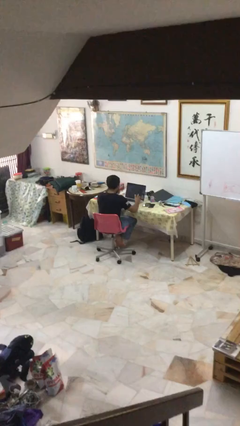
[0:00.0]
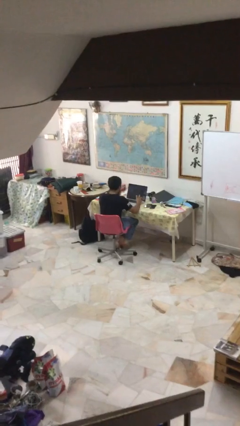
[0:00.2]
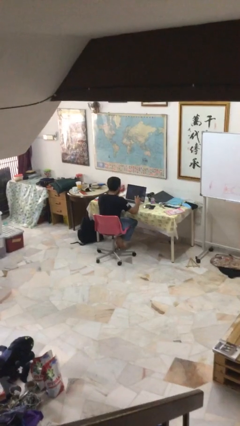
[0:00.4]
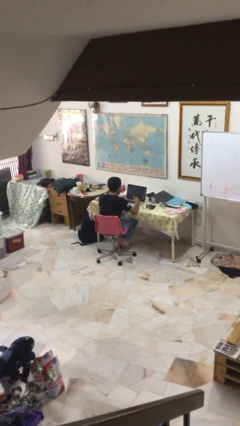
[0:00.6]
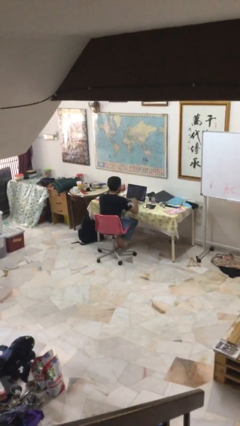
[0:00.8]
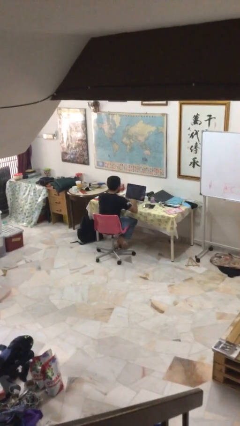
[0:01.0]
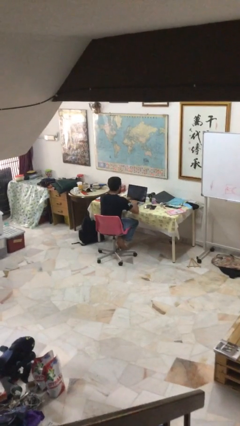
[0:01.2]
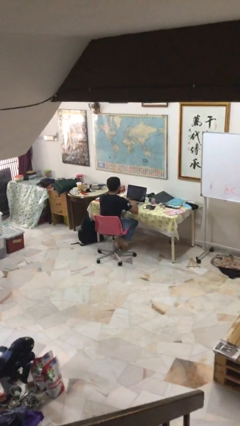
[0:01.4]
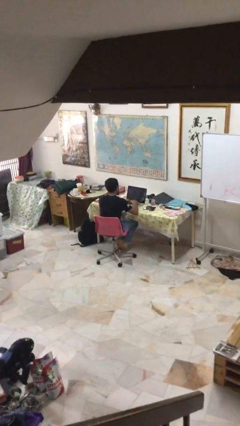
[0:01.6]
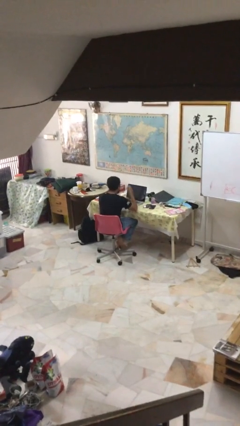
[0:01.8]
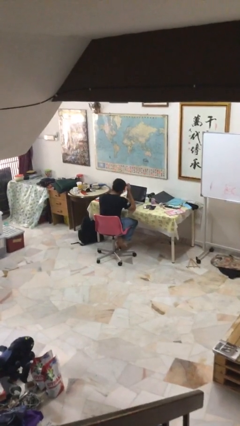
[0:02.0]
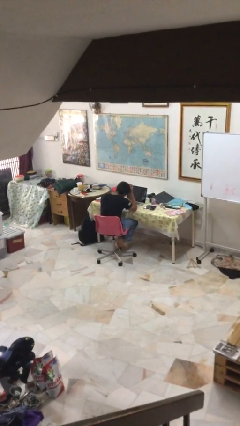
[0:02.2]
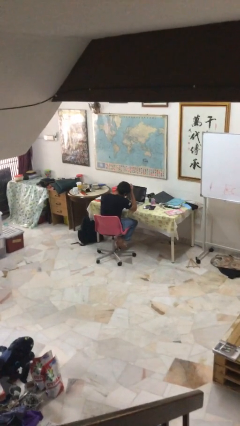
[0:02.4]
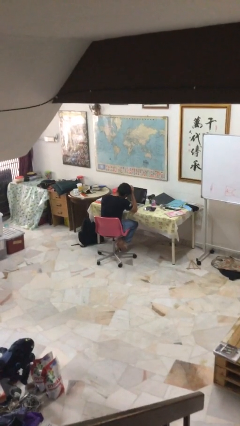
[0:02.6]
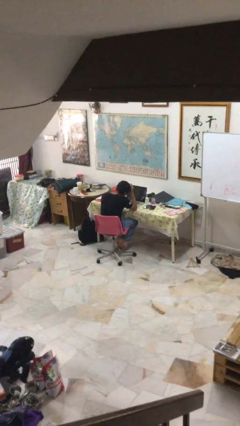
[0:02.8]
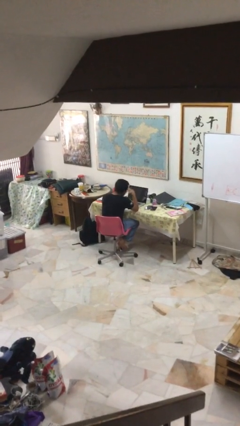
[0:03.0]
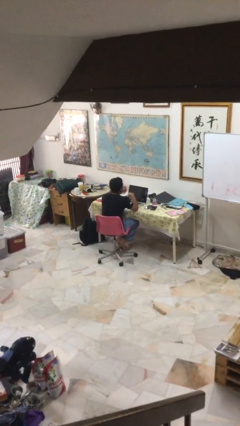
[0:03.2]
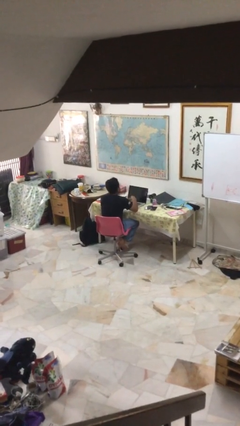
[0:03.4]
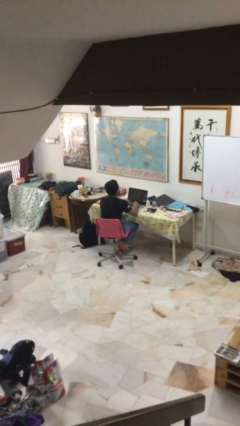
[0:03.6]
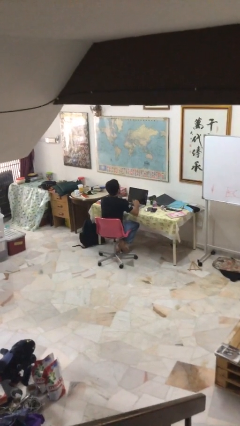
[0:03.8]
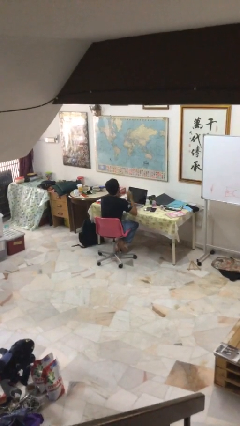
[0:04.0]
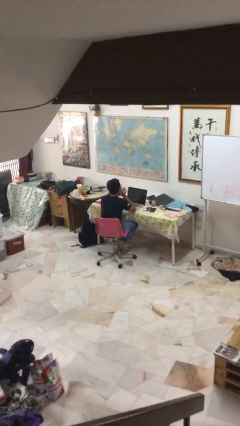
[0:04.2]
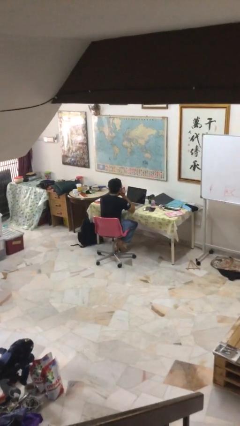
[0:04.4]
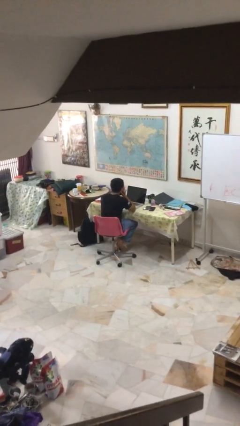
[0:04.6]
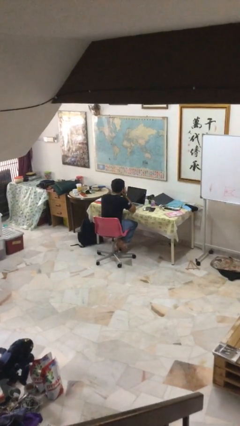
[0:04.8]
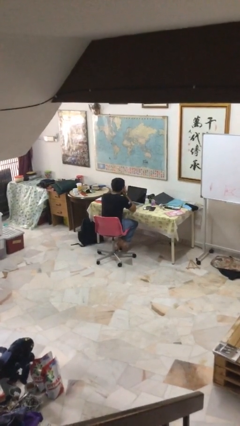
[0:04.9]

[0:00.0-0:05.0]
person interacts with laptop

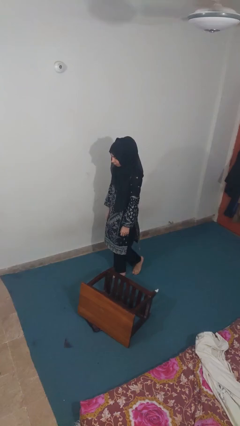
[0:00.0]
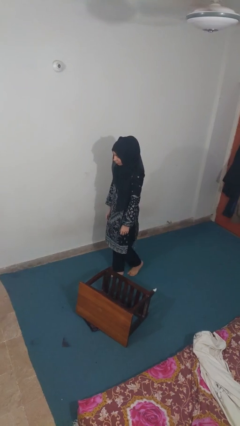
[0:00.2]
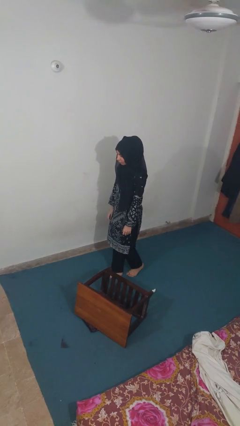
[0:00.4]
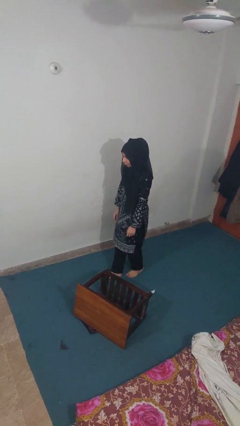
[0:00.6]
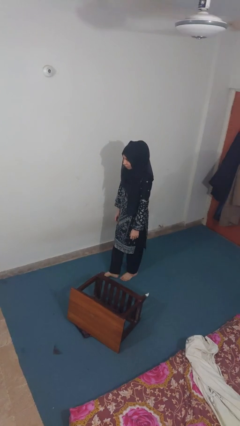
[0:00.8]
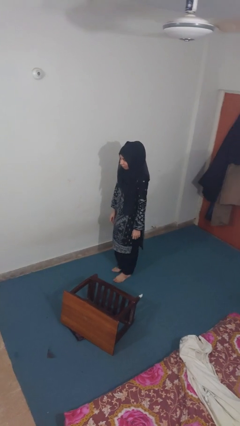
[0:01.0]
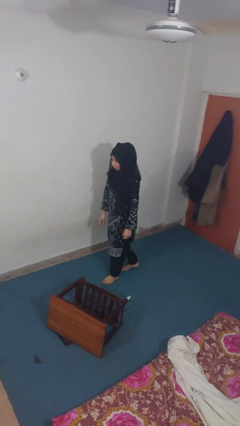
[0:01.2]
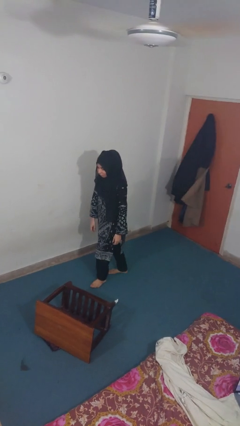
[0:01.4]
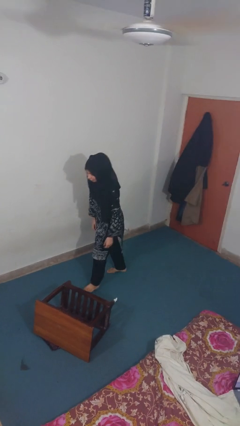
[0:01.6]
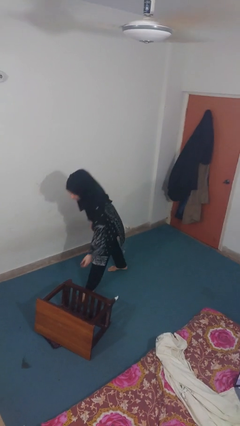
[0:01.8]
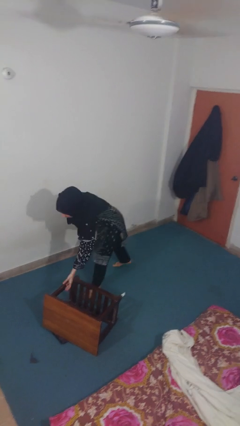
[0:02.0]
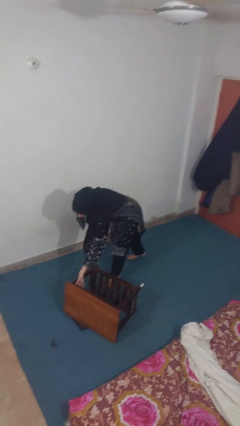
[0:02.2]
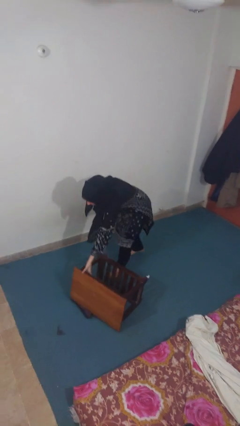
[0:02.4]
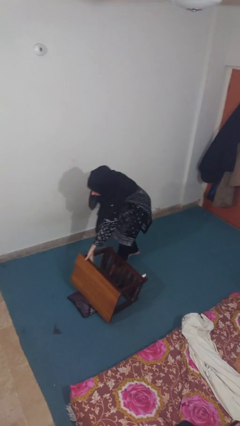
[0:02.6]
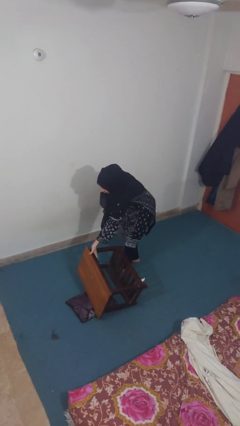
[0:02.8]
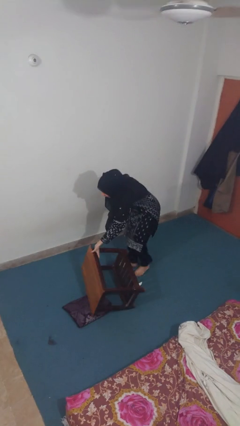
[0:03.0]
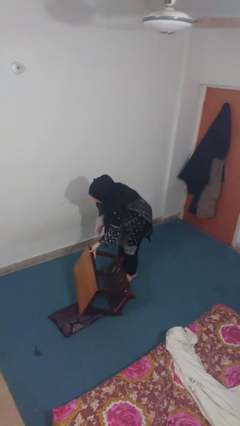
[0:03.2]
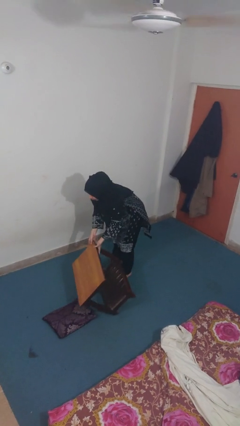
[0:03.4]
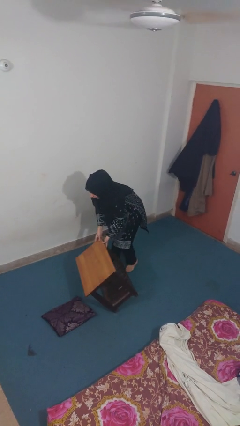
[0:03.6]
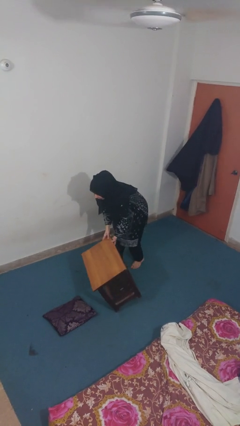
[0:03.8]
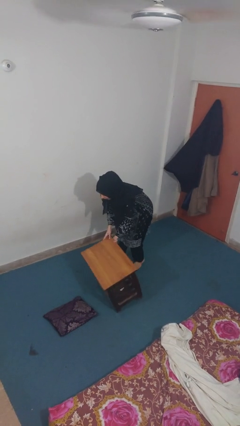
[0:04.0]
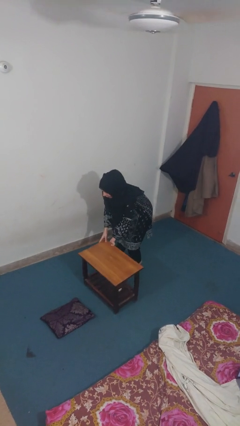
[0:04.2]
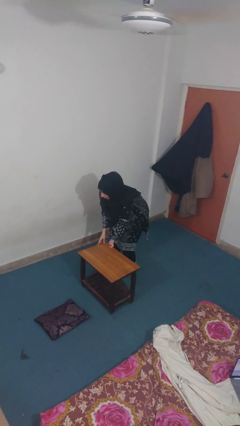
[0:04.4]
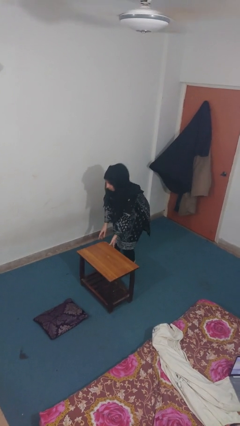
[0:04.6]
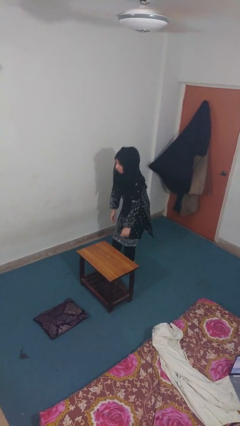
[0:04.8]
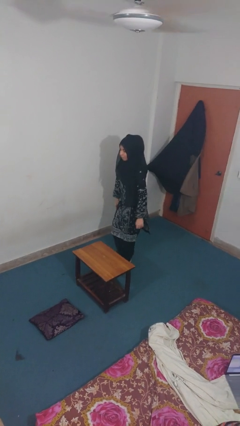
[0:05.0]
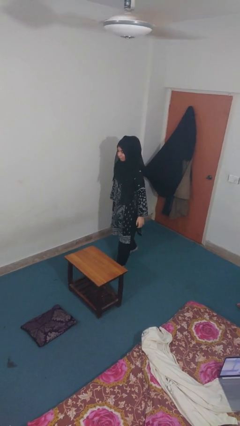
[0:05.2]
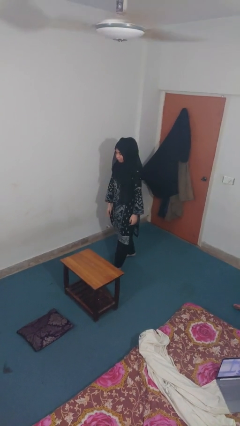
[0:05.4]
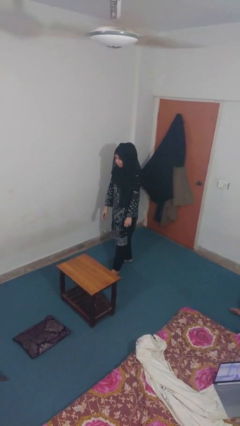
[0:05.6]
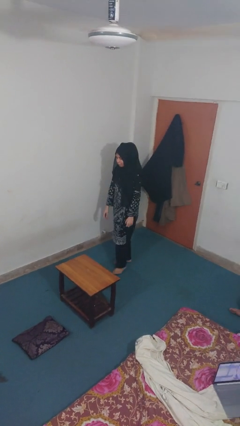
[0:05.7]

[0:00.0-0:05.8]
person sets upright furniture

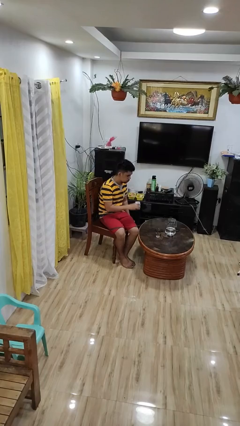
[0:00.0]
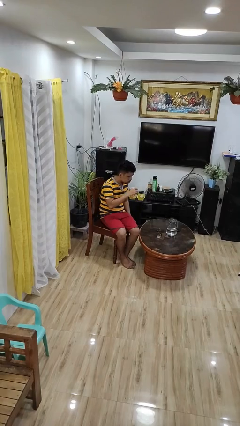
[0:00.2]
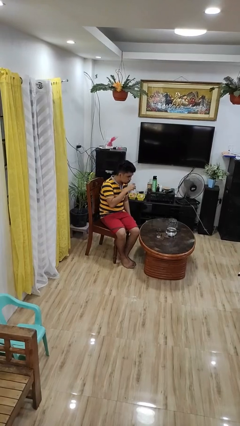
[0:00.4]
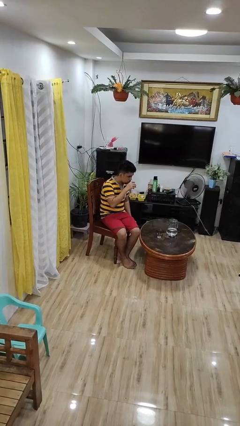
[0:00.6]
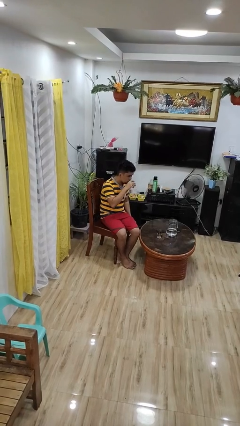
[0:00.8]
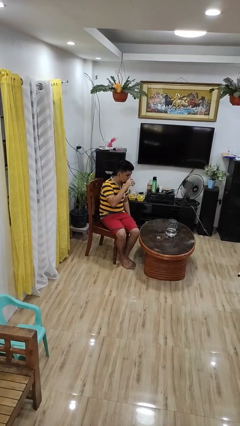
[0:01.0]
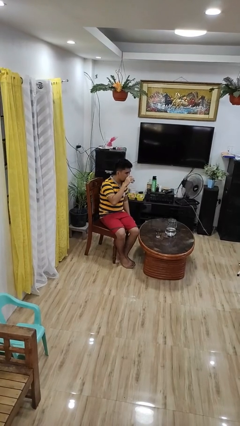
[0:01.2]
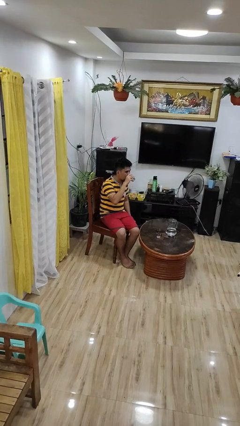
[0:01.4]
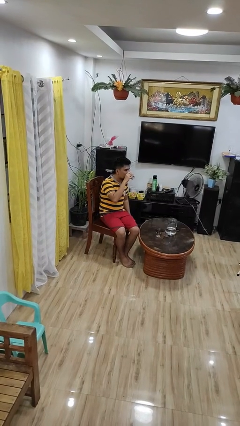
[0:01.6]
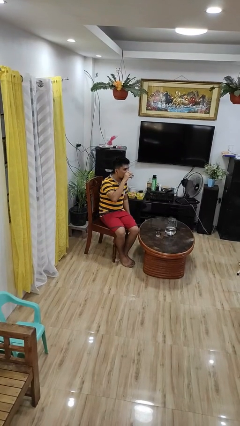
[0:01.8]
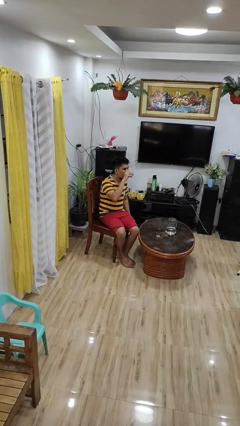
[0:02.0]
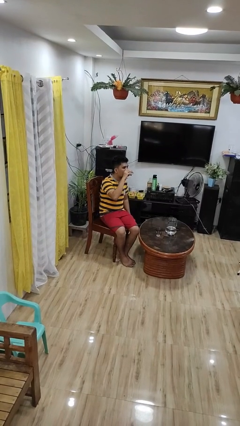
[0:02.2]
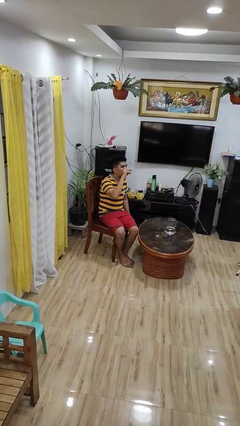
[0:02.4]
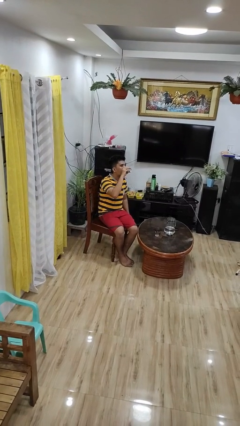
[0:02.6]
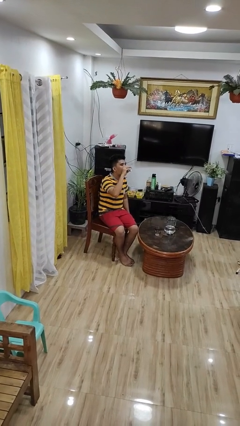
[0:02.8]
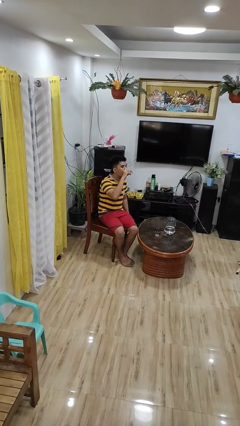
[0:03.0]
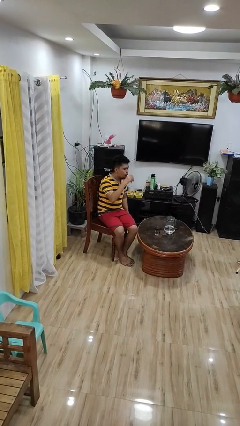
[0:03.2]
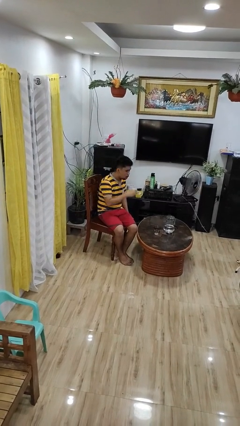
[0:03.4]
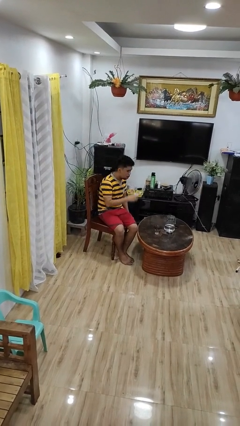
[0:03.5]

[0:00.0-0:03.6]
person drinks from shotglass

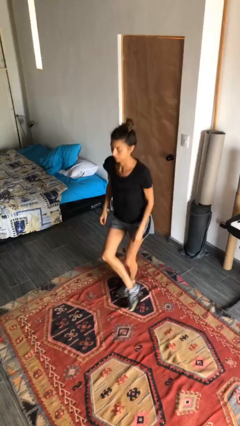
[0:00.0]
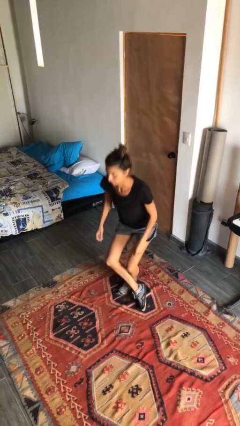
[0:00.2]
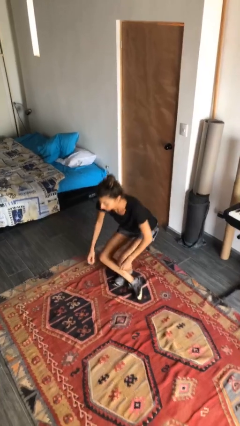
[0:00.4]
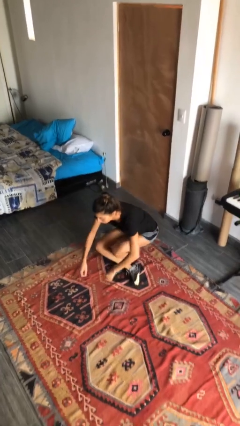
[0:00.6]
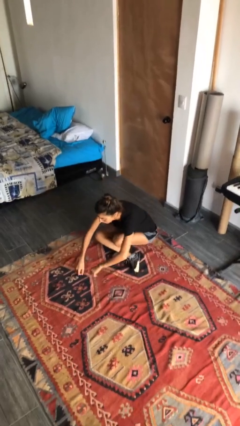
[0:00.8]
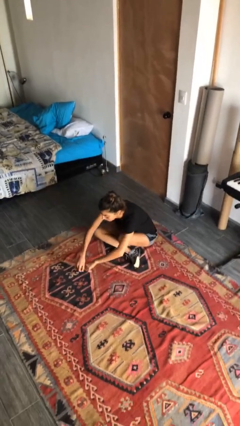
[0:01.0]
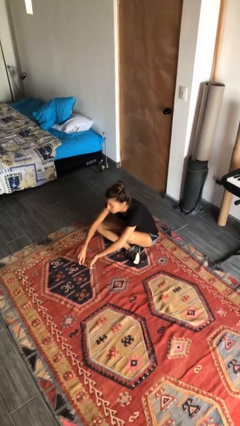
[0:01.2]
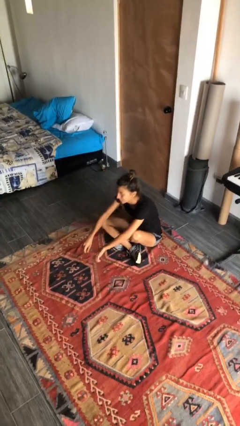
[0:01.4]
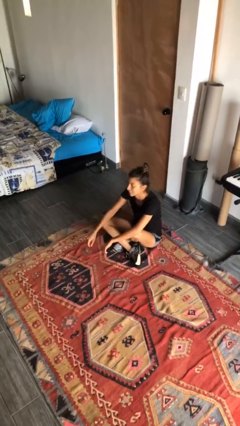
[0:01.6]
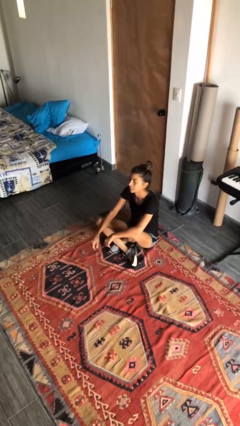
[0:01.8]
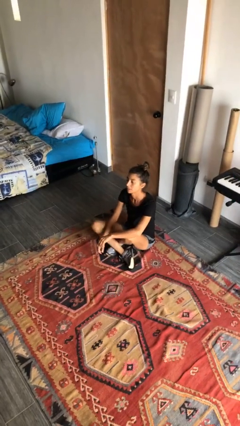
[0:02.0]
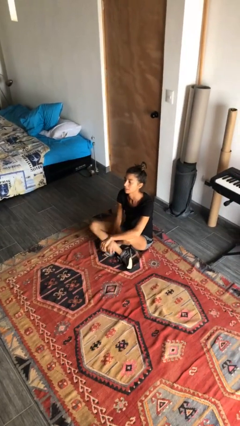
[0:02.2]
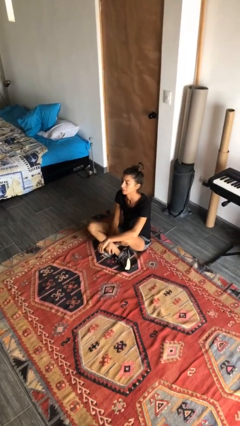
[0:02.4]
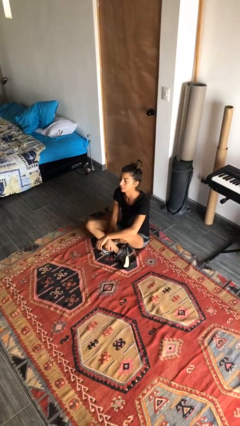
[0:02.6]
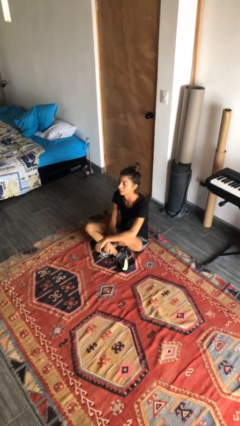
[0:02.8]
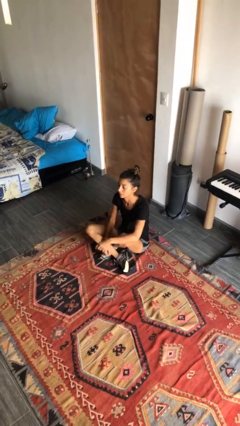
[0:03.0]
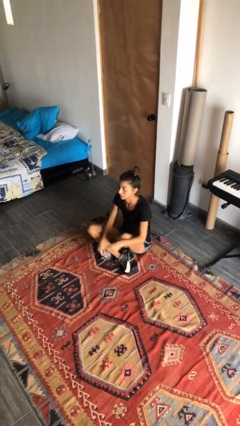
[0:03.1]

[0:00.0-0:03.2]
person sits crisscross

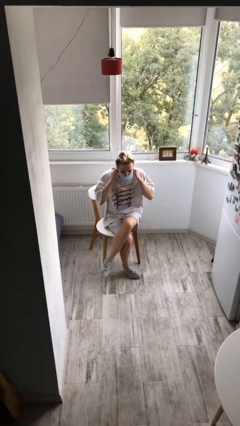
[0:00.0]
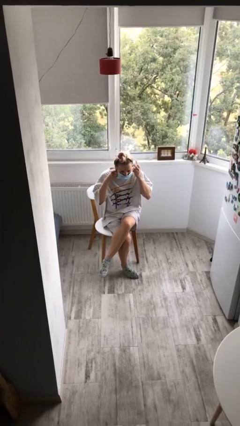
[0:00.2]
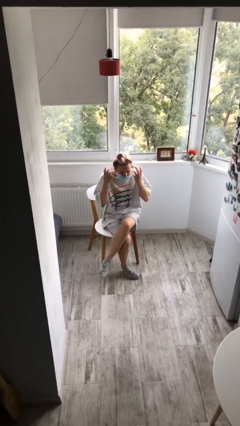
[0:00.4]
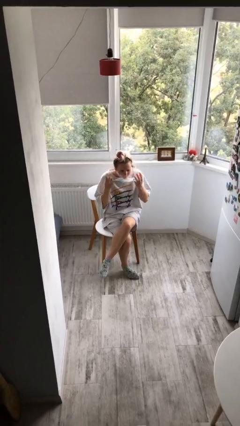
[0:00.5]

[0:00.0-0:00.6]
person takes off facemask
